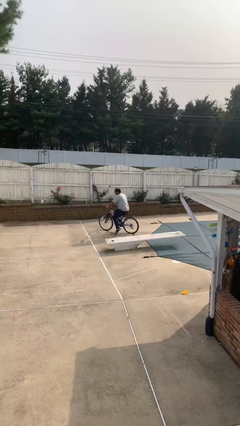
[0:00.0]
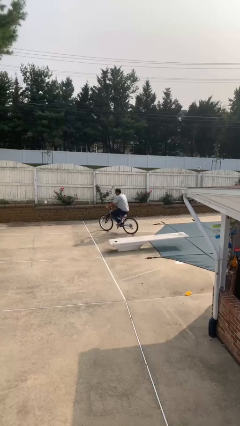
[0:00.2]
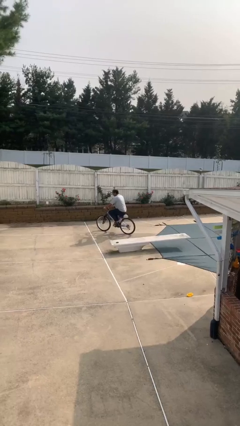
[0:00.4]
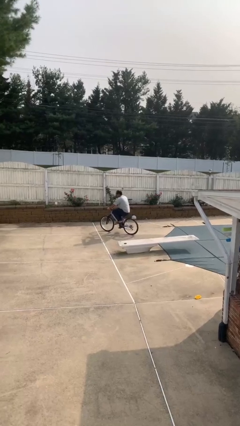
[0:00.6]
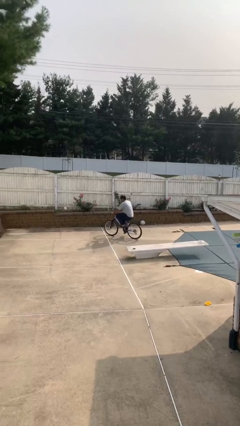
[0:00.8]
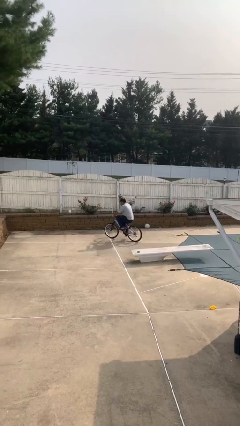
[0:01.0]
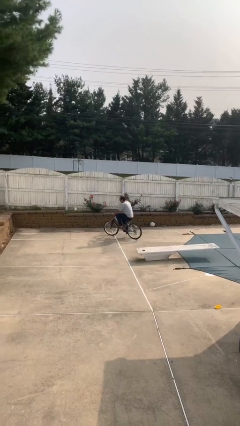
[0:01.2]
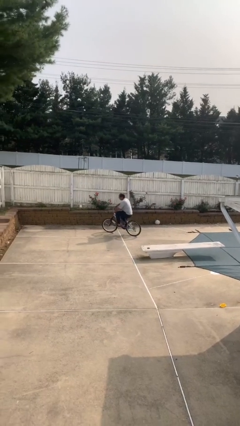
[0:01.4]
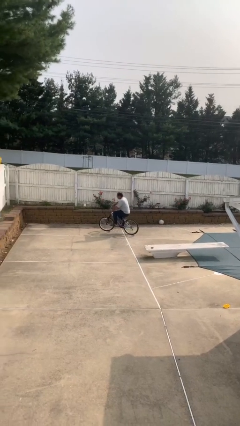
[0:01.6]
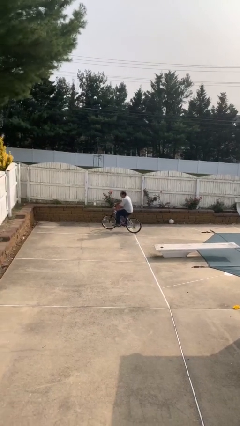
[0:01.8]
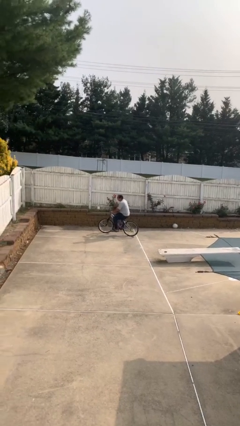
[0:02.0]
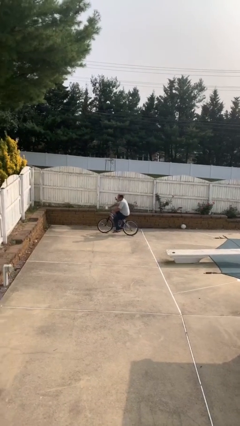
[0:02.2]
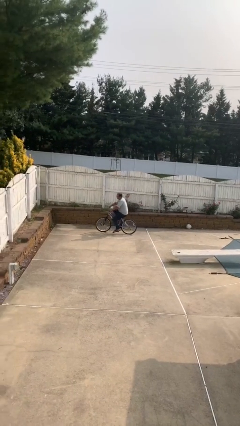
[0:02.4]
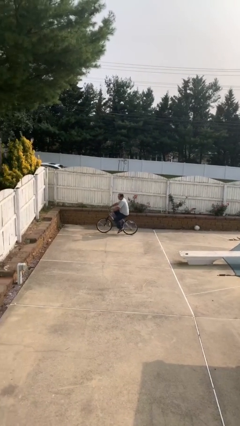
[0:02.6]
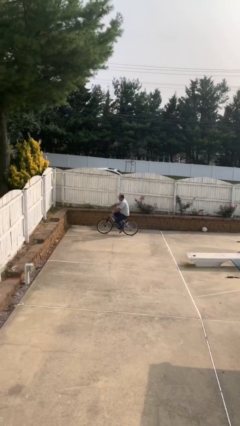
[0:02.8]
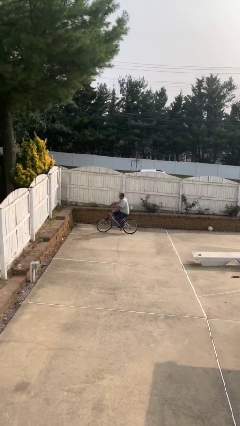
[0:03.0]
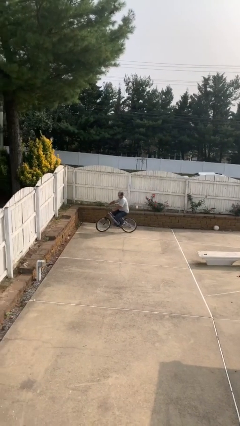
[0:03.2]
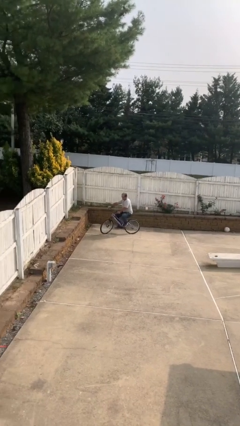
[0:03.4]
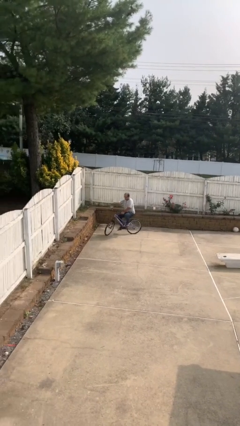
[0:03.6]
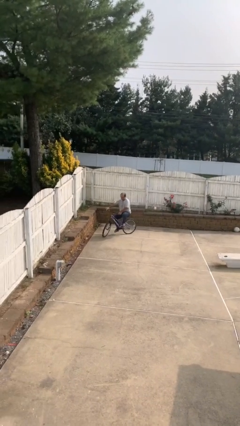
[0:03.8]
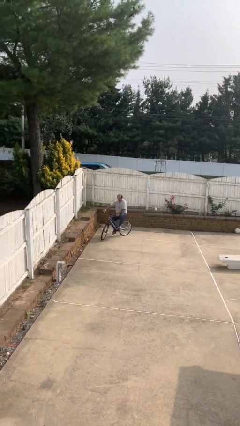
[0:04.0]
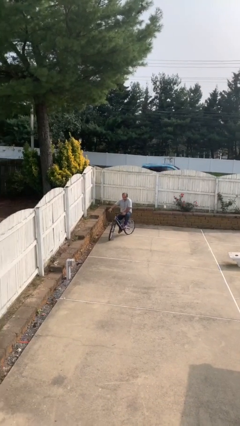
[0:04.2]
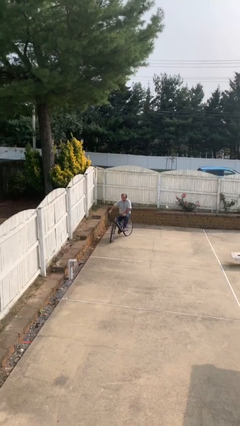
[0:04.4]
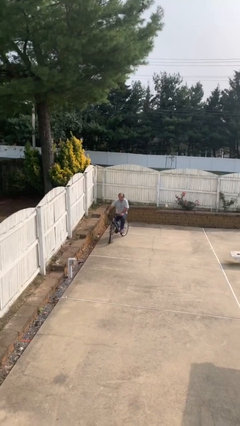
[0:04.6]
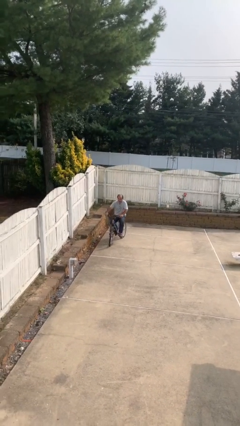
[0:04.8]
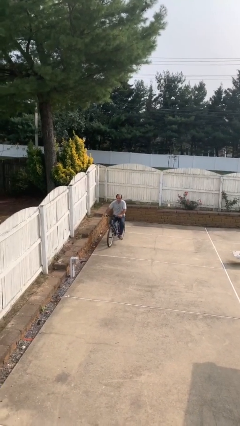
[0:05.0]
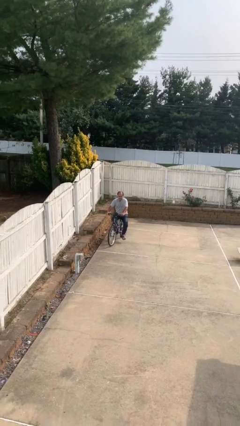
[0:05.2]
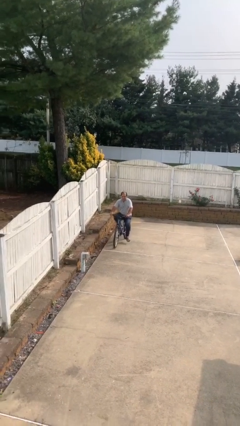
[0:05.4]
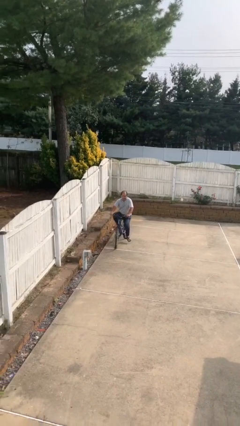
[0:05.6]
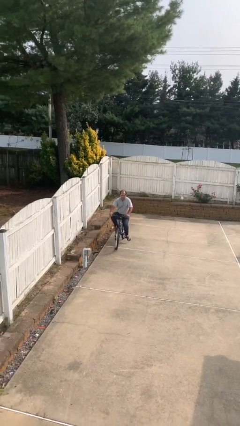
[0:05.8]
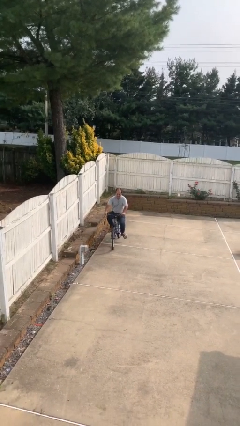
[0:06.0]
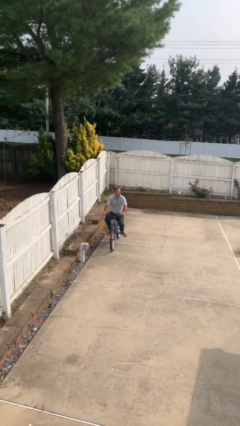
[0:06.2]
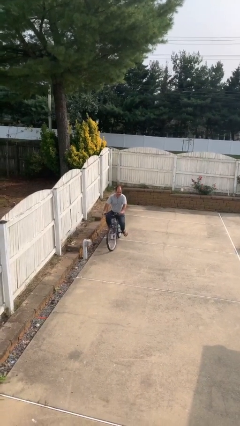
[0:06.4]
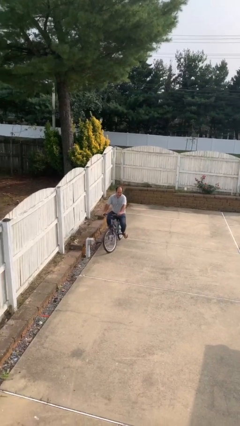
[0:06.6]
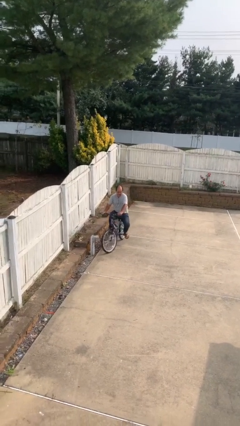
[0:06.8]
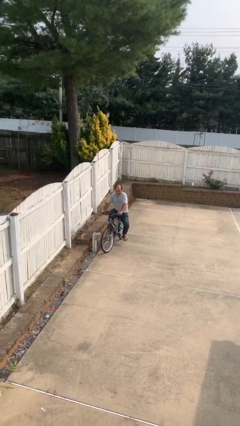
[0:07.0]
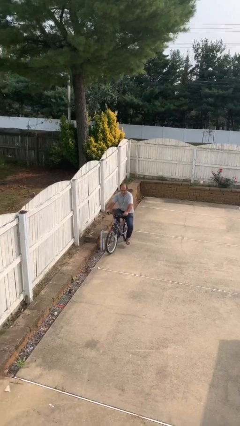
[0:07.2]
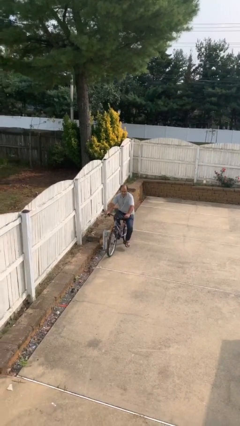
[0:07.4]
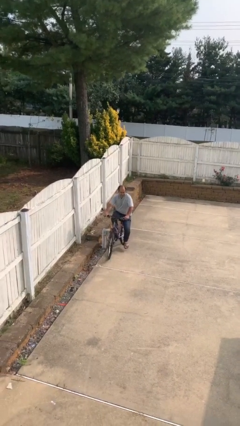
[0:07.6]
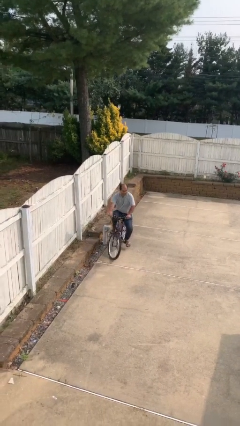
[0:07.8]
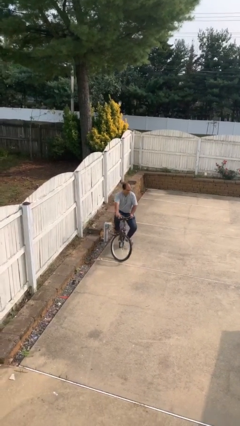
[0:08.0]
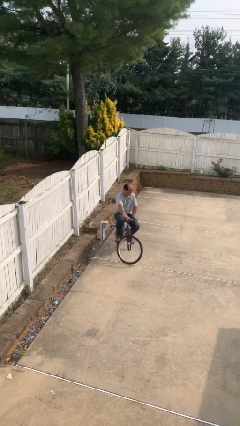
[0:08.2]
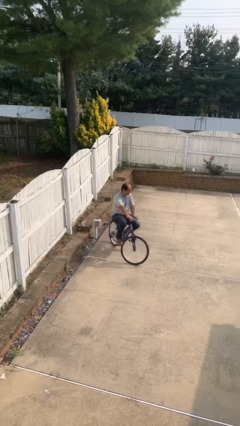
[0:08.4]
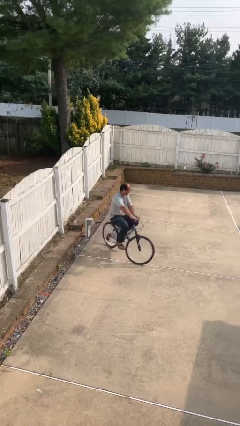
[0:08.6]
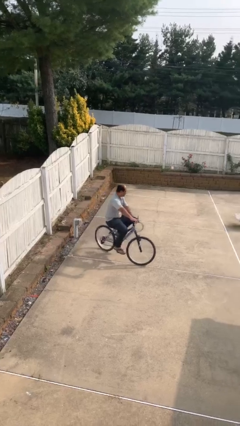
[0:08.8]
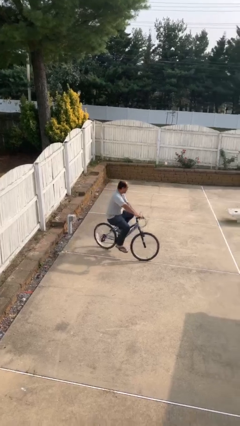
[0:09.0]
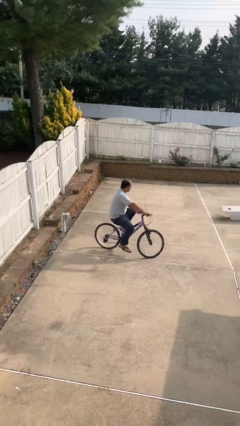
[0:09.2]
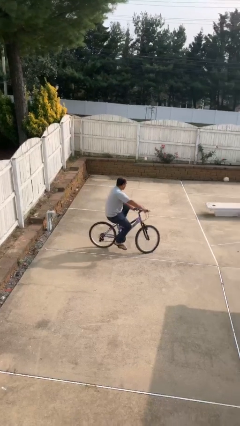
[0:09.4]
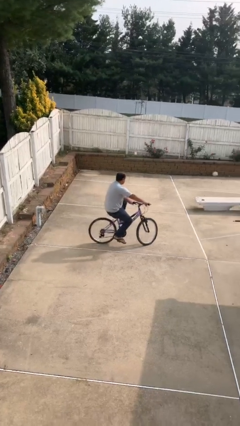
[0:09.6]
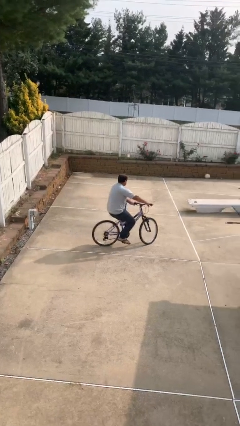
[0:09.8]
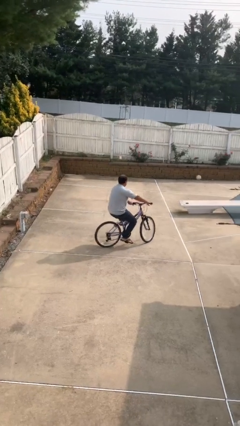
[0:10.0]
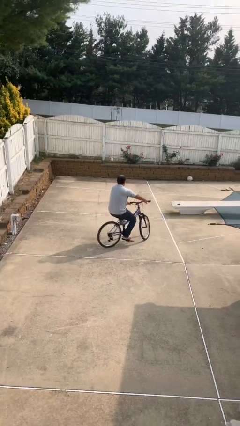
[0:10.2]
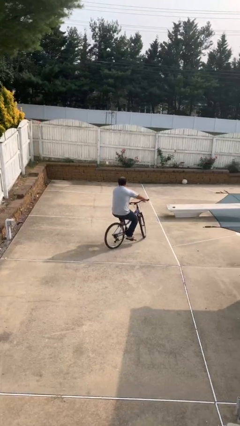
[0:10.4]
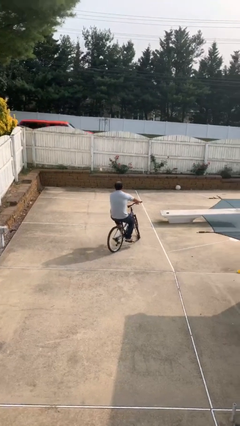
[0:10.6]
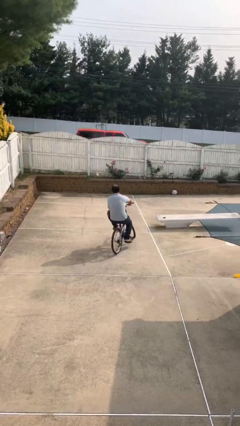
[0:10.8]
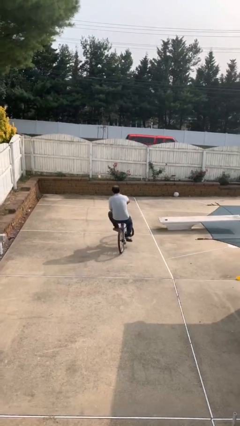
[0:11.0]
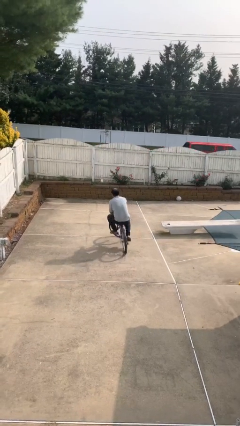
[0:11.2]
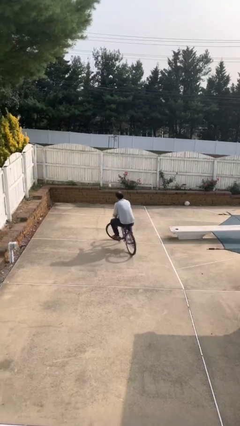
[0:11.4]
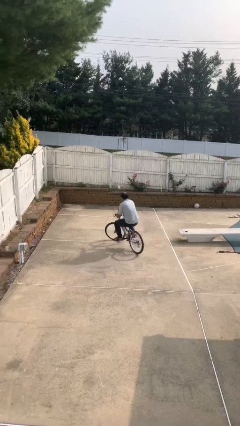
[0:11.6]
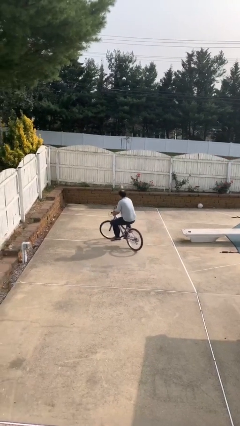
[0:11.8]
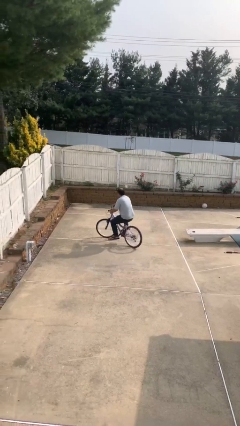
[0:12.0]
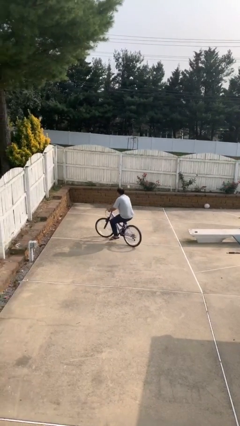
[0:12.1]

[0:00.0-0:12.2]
person rides bicycle

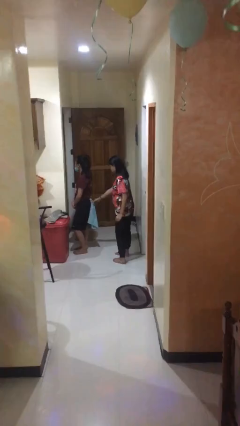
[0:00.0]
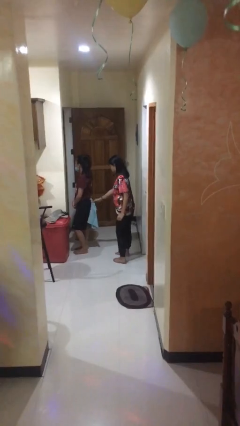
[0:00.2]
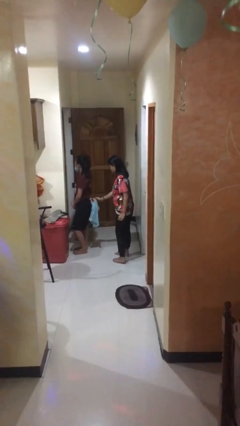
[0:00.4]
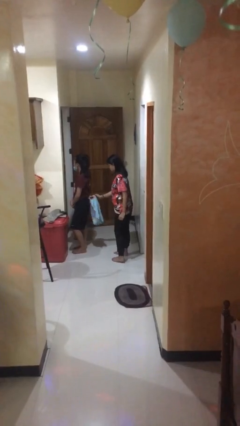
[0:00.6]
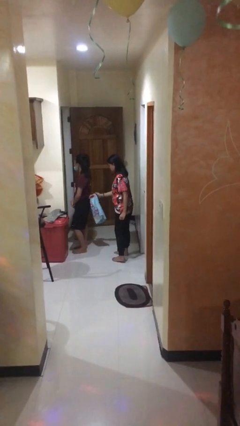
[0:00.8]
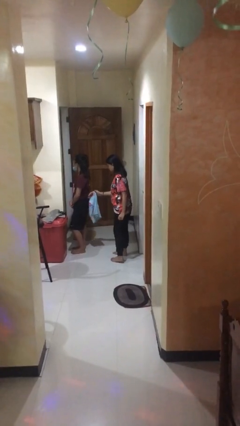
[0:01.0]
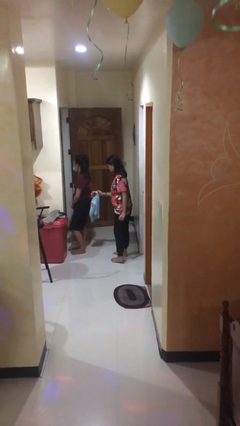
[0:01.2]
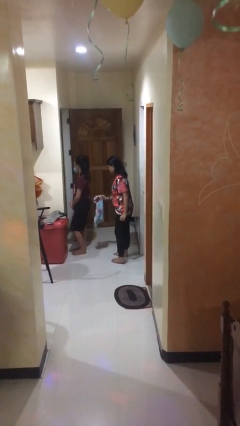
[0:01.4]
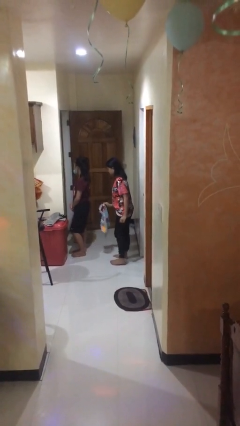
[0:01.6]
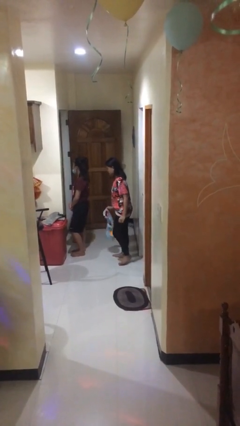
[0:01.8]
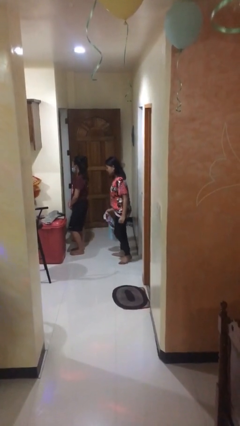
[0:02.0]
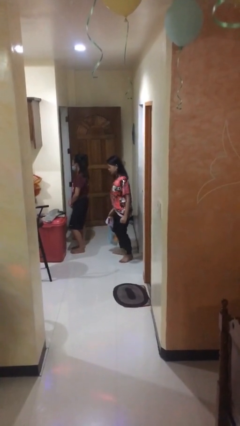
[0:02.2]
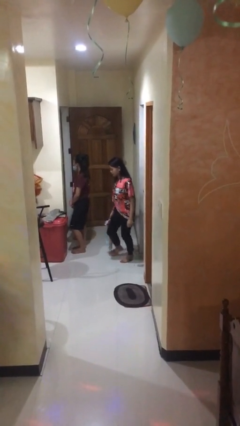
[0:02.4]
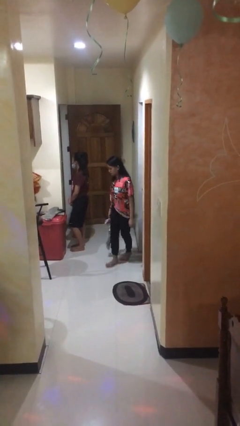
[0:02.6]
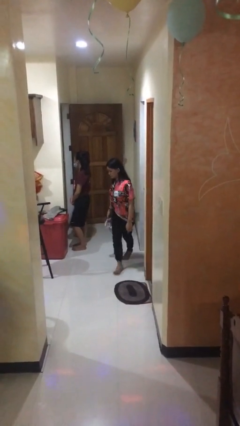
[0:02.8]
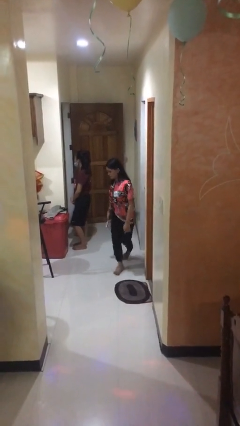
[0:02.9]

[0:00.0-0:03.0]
person steals object from person

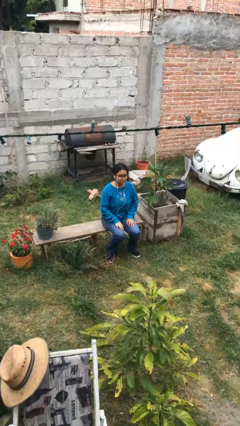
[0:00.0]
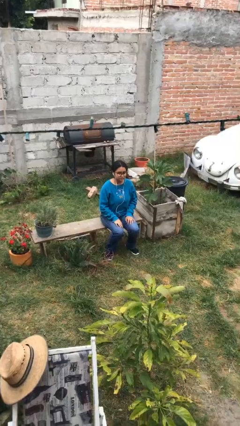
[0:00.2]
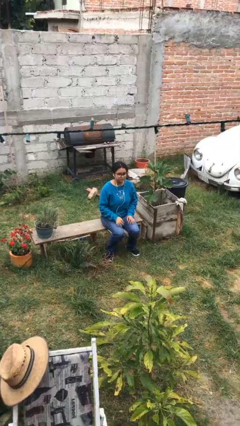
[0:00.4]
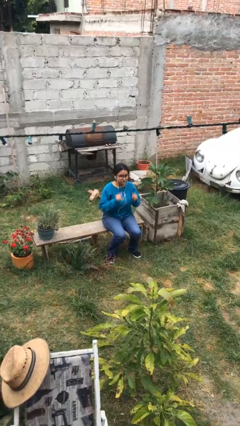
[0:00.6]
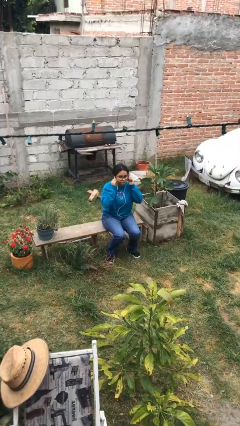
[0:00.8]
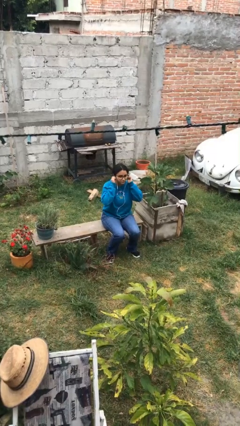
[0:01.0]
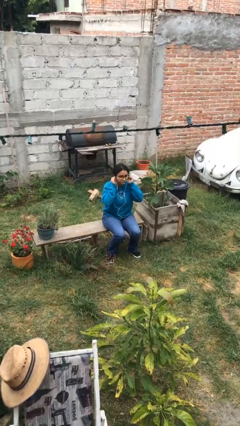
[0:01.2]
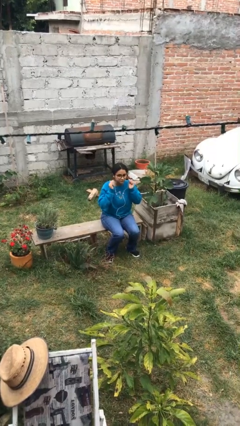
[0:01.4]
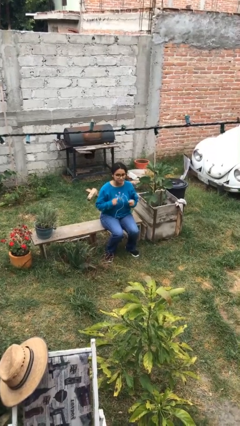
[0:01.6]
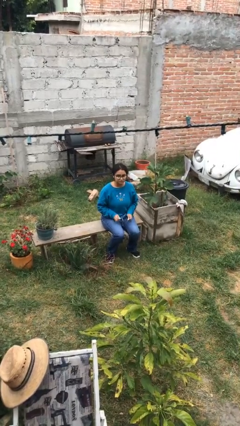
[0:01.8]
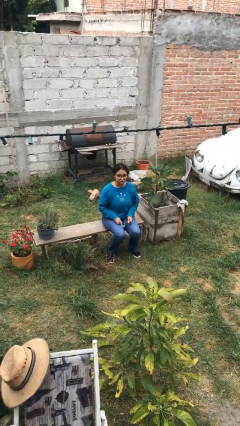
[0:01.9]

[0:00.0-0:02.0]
person takes off headphones

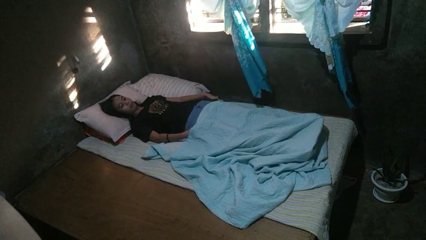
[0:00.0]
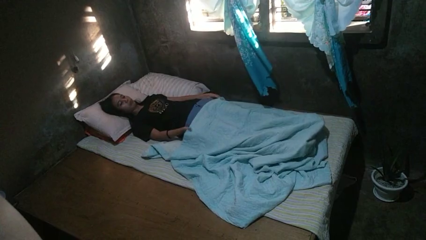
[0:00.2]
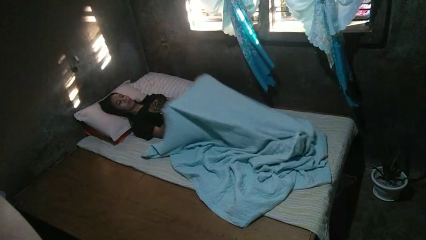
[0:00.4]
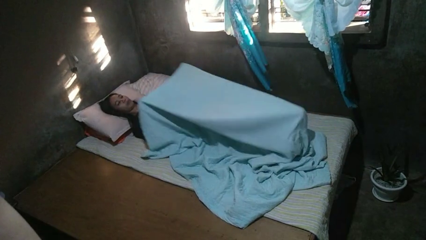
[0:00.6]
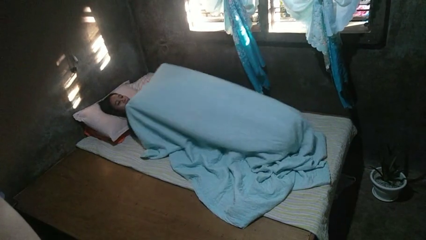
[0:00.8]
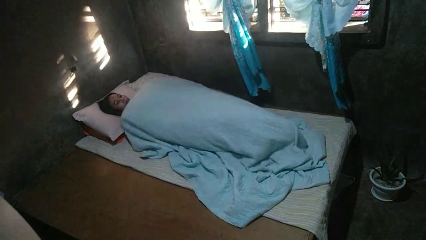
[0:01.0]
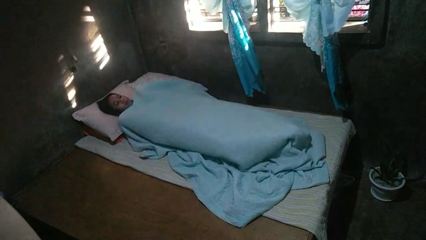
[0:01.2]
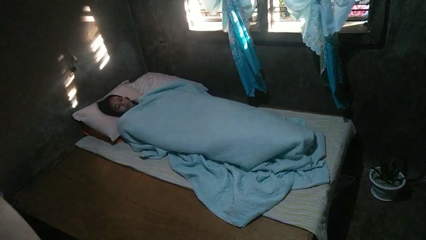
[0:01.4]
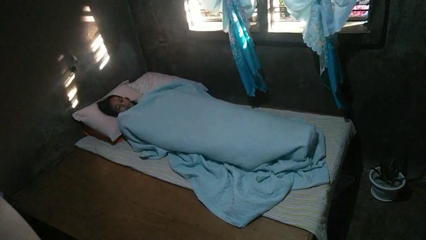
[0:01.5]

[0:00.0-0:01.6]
person covers with bedsheets
